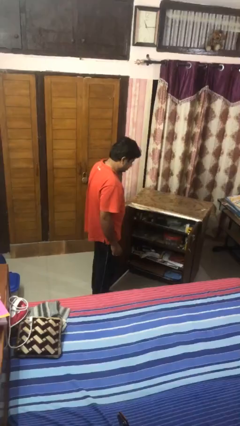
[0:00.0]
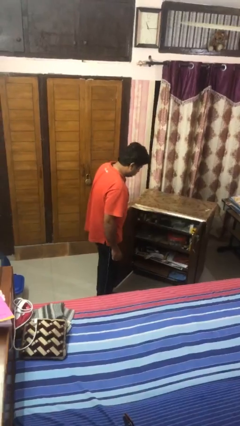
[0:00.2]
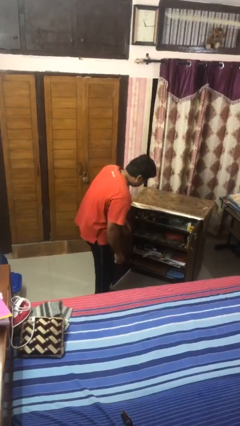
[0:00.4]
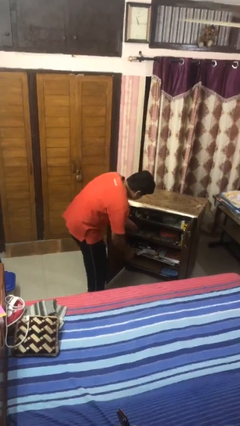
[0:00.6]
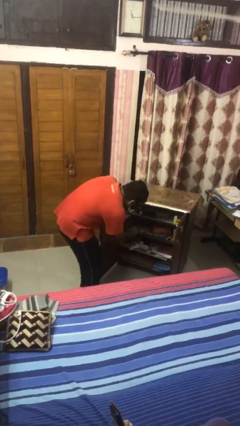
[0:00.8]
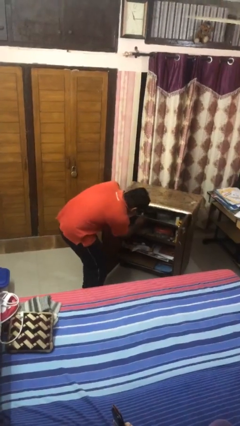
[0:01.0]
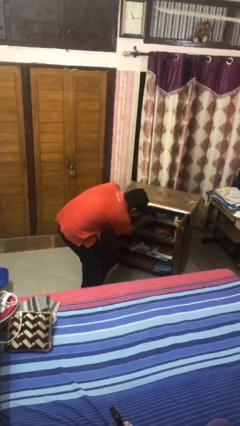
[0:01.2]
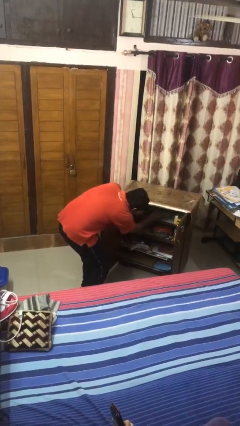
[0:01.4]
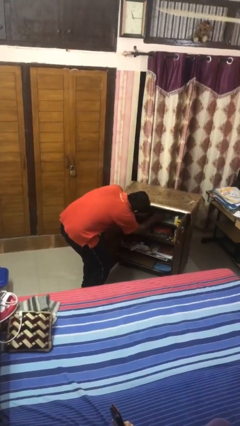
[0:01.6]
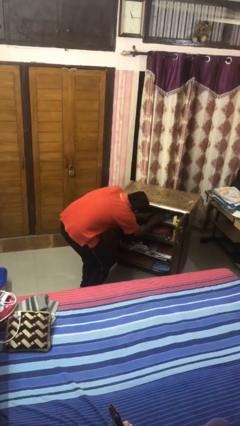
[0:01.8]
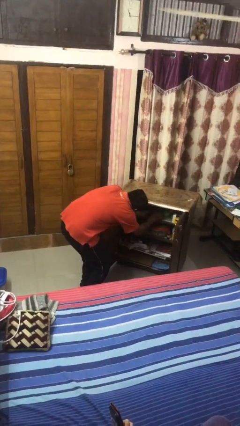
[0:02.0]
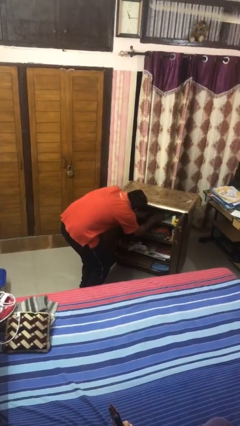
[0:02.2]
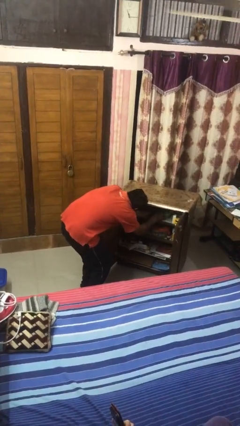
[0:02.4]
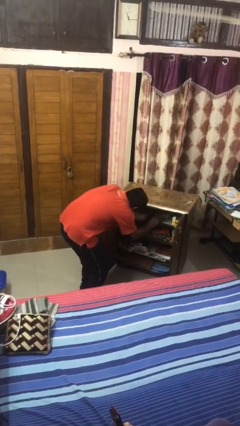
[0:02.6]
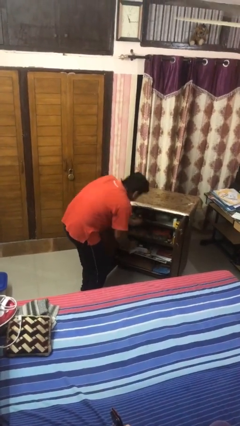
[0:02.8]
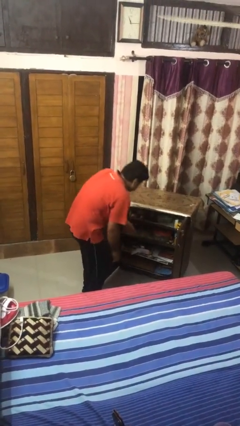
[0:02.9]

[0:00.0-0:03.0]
person searches in cabinet

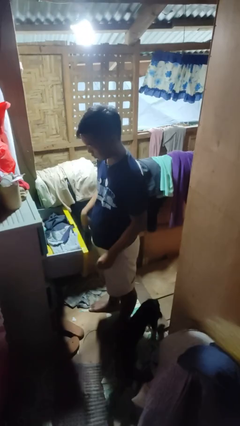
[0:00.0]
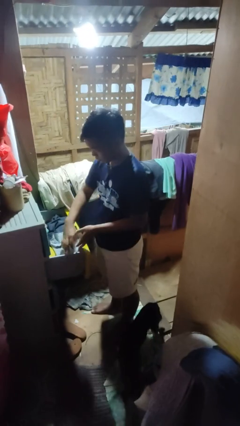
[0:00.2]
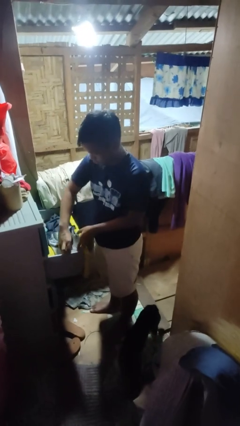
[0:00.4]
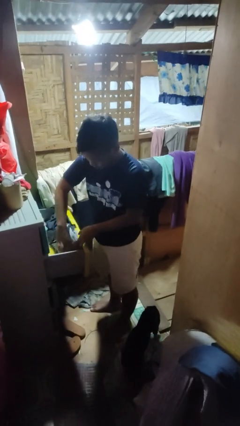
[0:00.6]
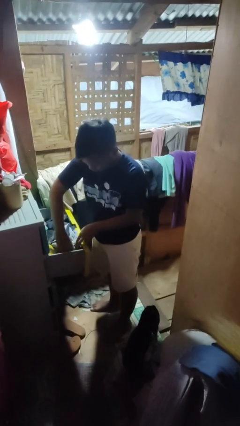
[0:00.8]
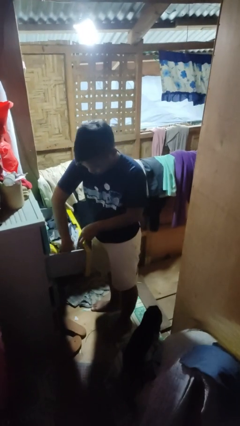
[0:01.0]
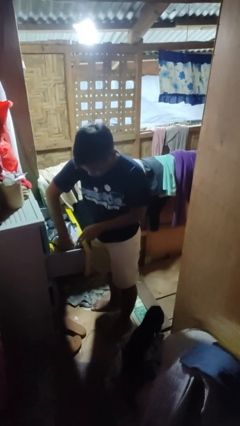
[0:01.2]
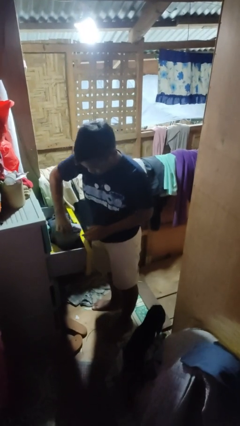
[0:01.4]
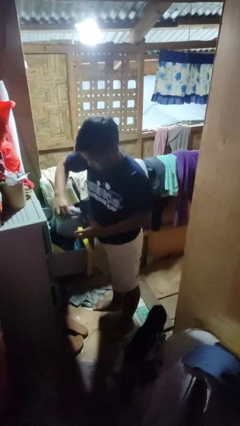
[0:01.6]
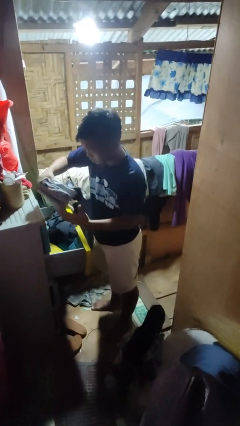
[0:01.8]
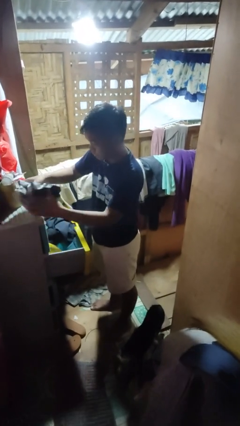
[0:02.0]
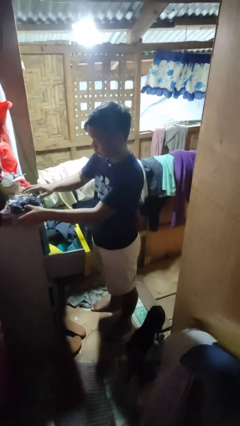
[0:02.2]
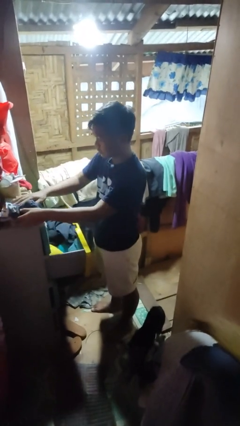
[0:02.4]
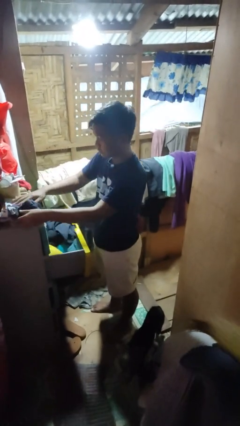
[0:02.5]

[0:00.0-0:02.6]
person takes clothes from dresser

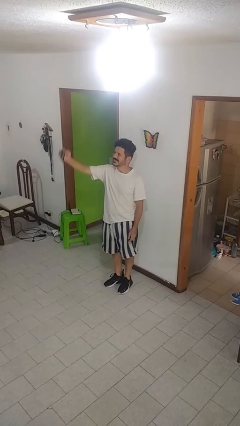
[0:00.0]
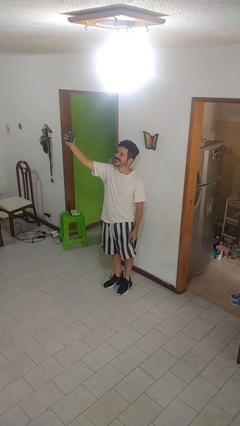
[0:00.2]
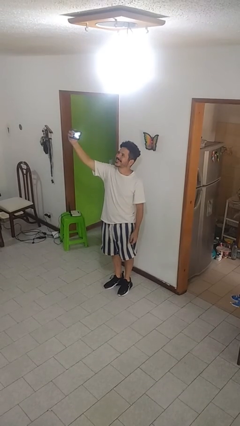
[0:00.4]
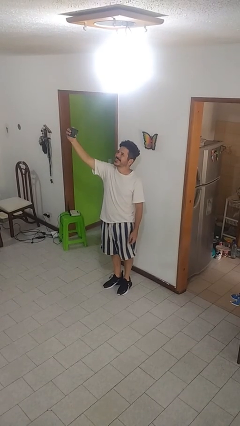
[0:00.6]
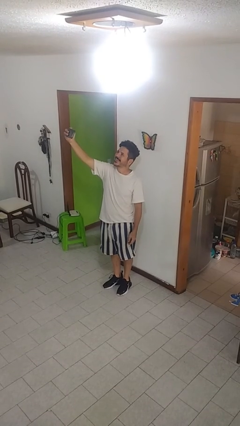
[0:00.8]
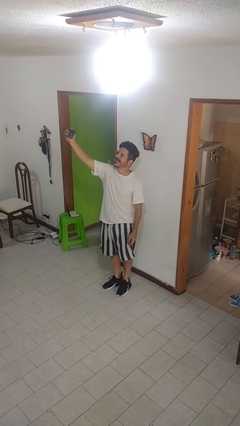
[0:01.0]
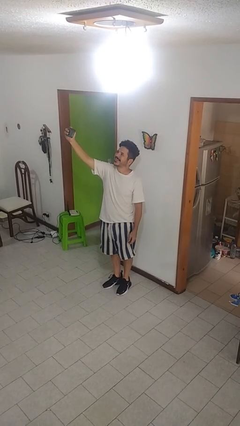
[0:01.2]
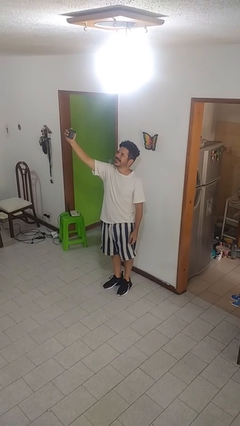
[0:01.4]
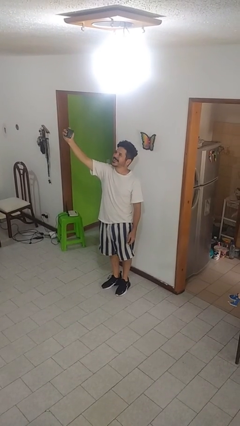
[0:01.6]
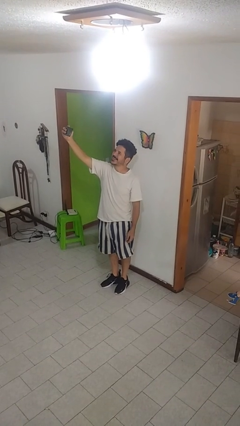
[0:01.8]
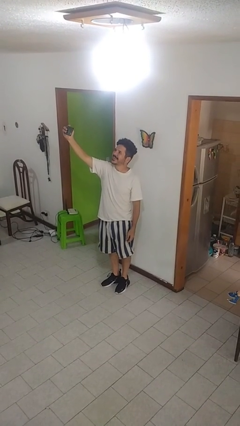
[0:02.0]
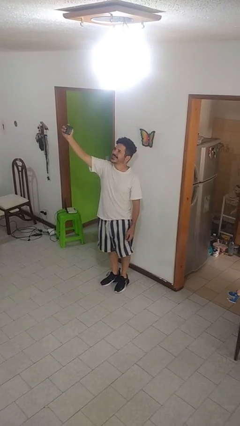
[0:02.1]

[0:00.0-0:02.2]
person takes selfie

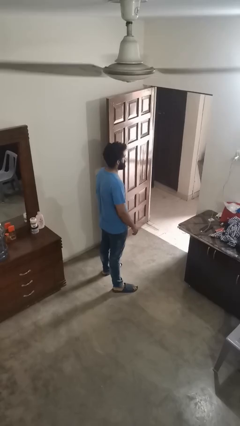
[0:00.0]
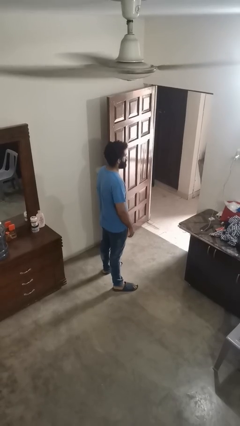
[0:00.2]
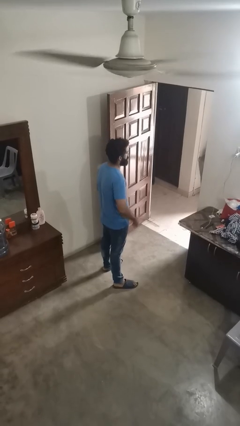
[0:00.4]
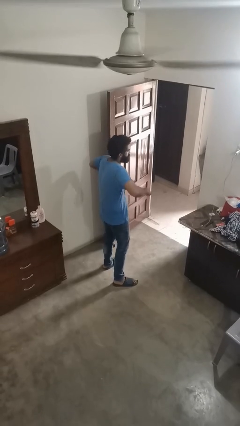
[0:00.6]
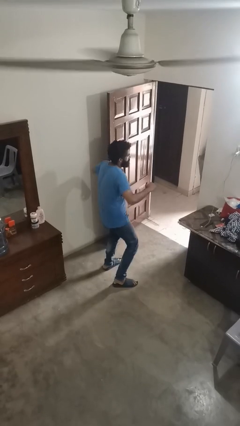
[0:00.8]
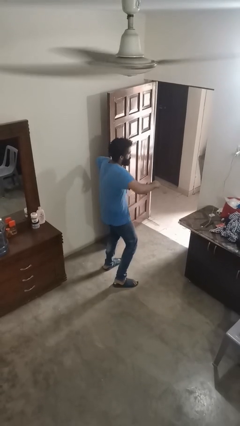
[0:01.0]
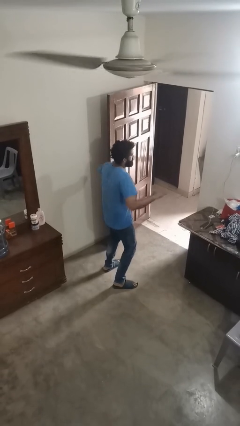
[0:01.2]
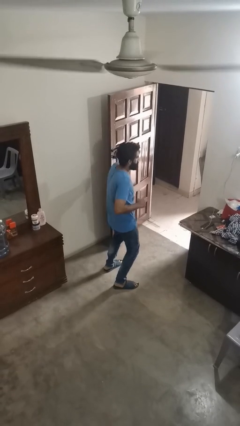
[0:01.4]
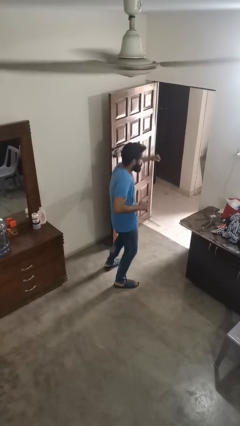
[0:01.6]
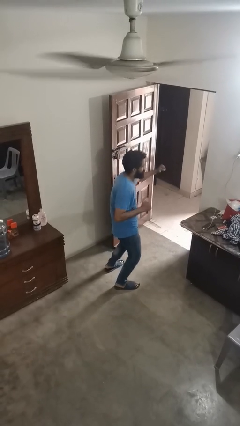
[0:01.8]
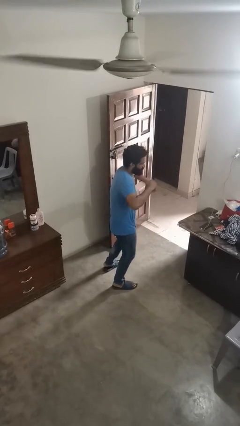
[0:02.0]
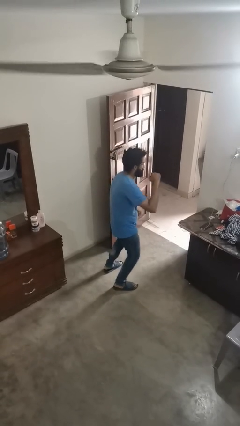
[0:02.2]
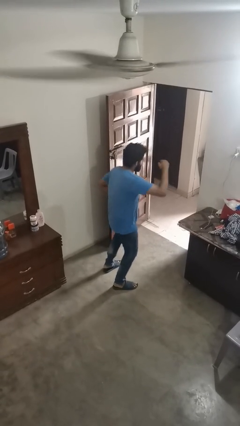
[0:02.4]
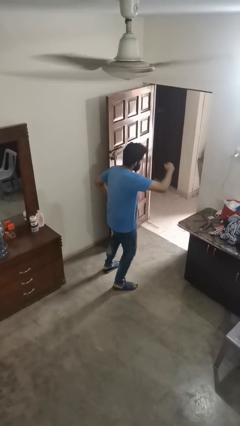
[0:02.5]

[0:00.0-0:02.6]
person dances in place

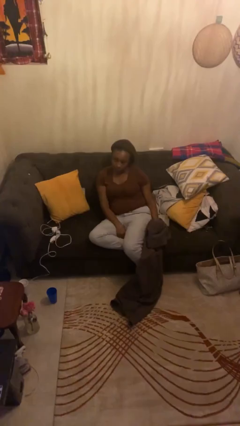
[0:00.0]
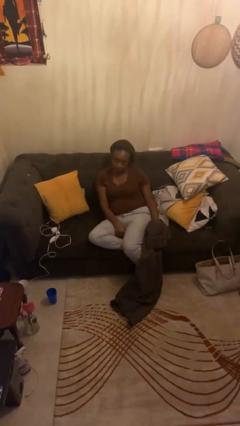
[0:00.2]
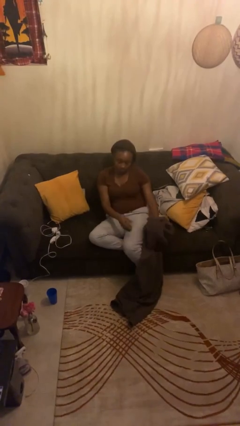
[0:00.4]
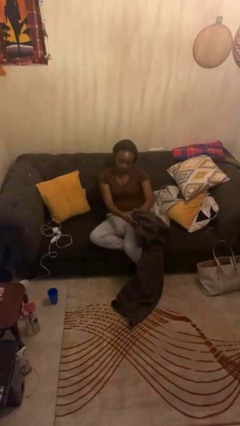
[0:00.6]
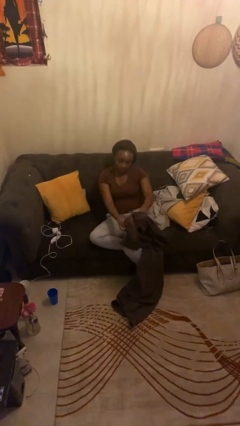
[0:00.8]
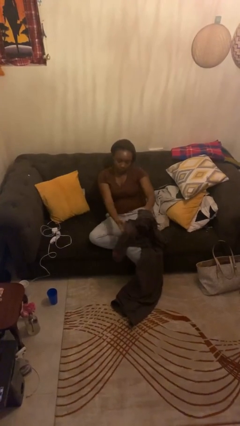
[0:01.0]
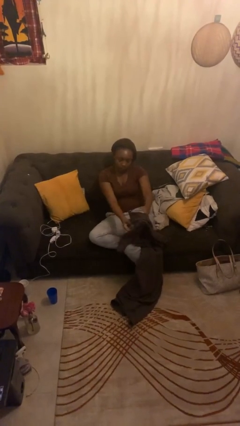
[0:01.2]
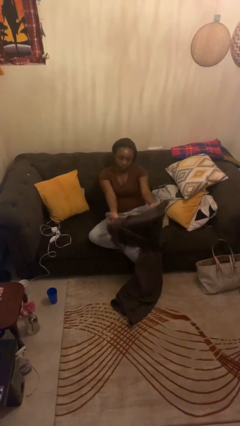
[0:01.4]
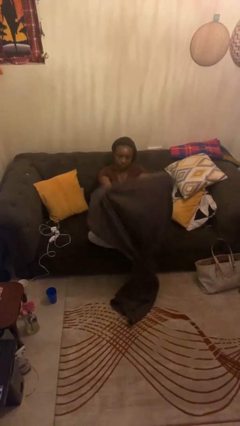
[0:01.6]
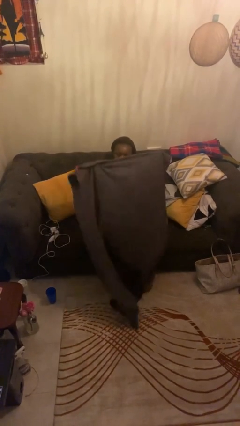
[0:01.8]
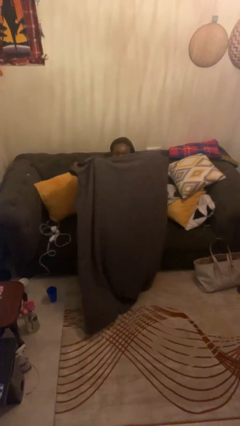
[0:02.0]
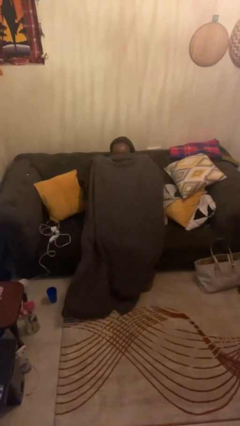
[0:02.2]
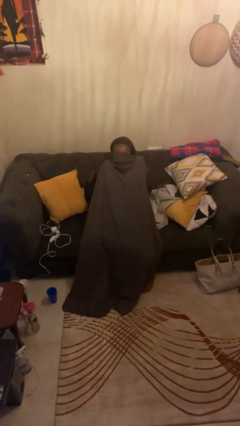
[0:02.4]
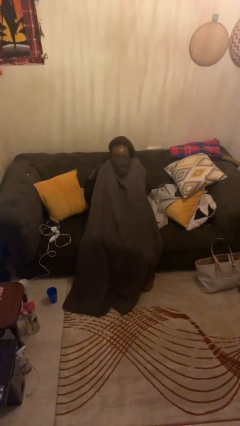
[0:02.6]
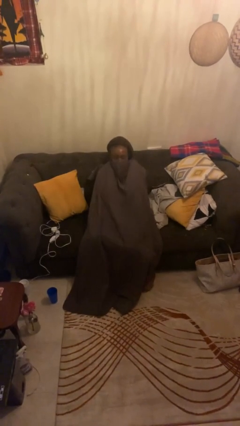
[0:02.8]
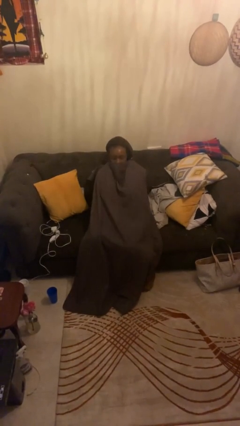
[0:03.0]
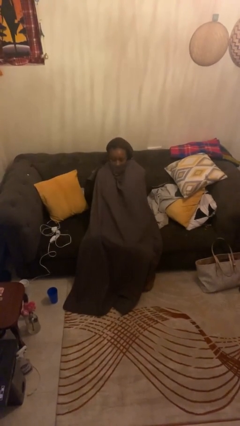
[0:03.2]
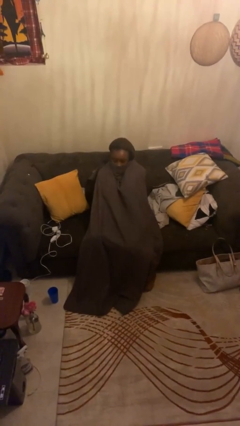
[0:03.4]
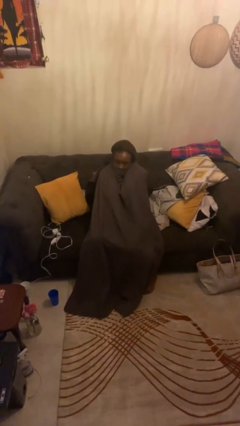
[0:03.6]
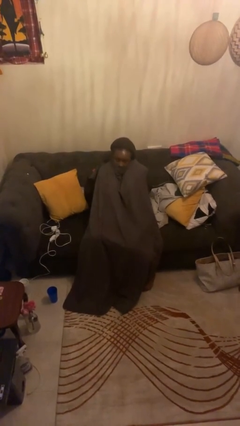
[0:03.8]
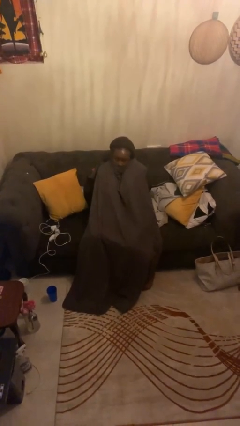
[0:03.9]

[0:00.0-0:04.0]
person covers with blanket

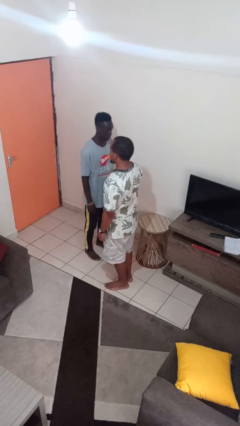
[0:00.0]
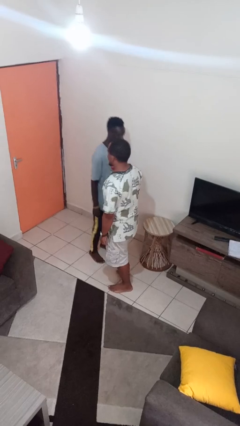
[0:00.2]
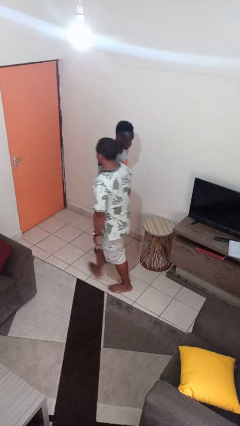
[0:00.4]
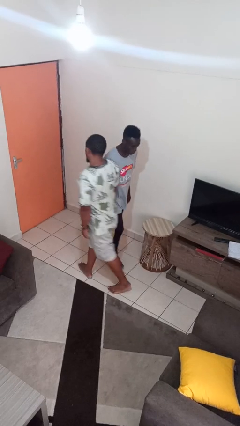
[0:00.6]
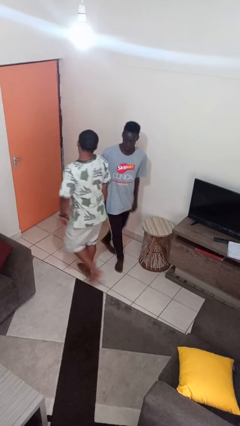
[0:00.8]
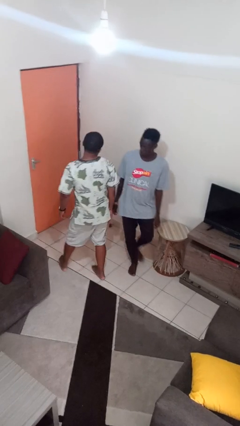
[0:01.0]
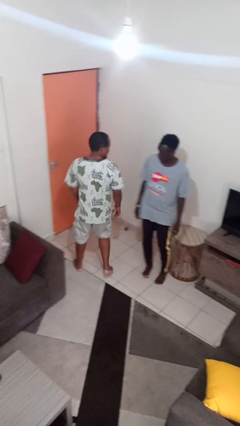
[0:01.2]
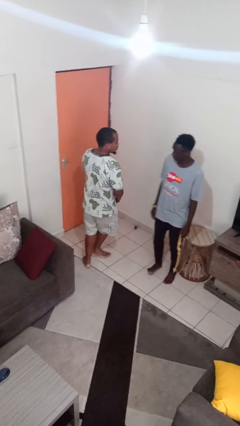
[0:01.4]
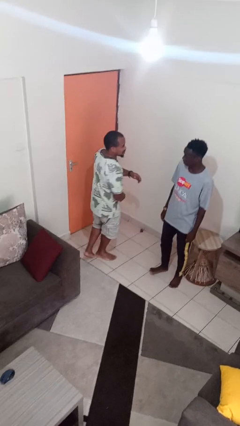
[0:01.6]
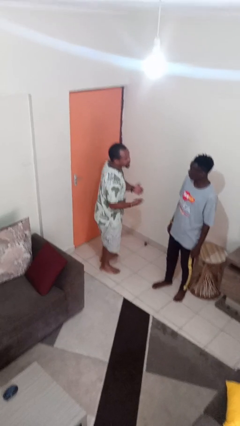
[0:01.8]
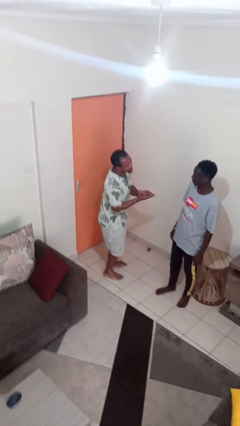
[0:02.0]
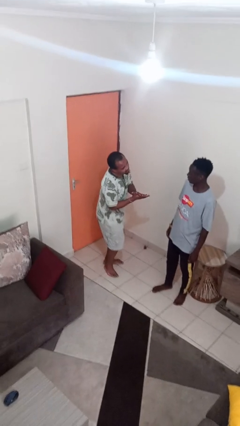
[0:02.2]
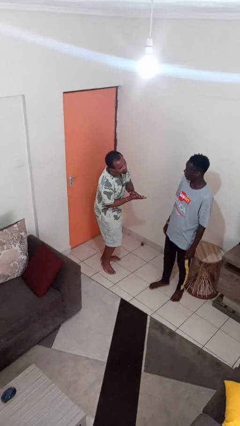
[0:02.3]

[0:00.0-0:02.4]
person bumps into person

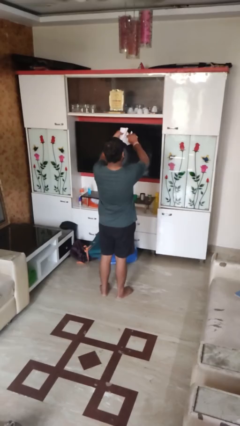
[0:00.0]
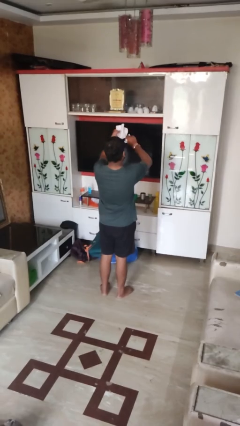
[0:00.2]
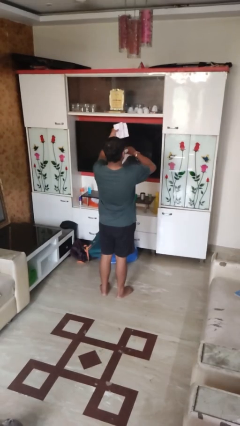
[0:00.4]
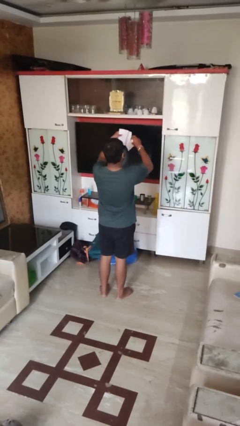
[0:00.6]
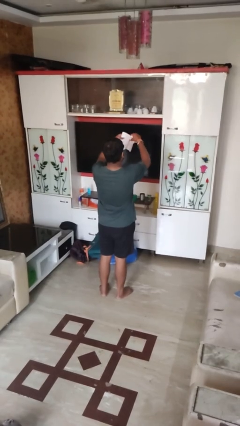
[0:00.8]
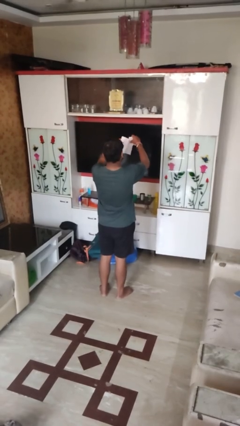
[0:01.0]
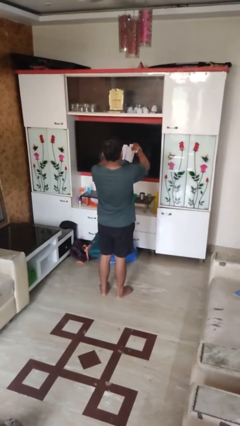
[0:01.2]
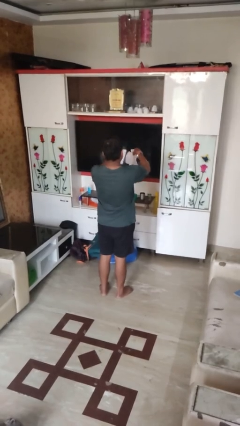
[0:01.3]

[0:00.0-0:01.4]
person tears paper
